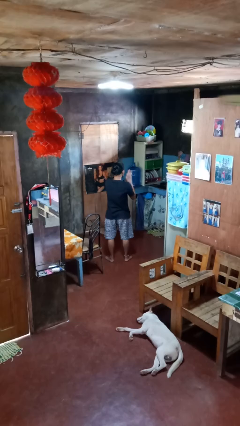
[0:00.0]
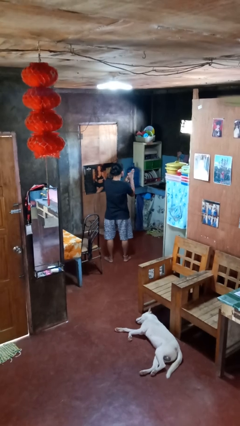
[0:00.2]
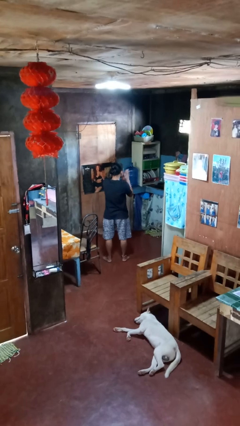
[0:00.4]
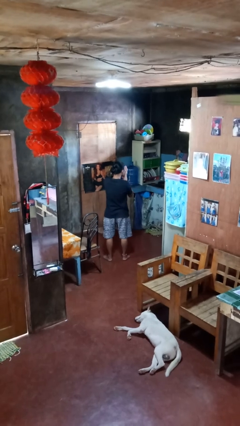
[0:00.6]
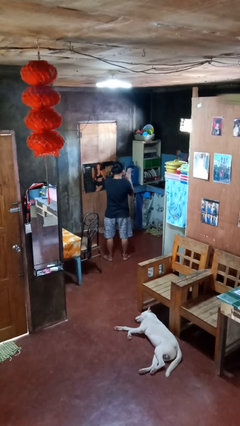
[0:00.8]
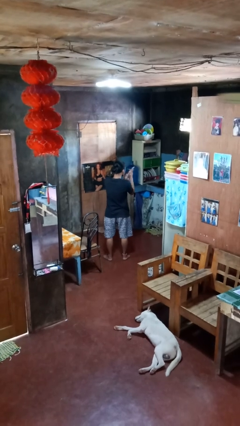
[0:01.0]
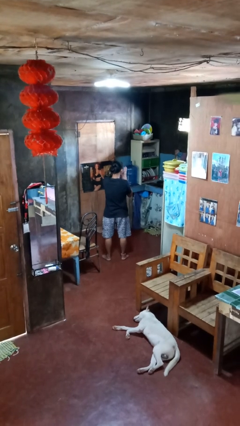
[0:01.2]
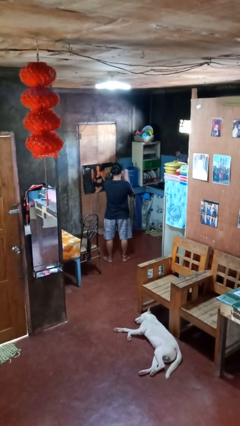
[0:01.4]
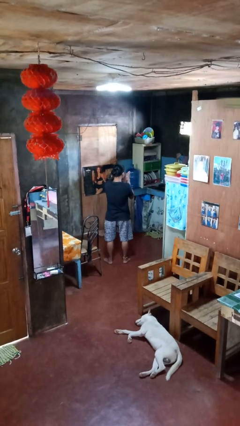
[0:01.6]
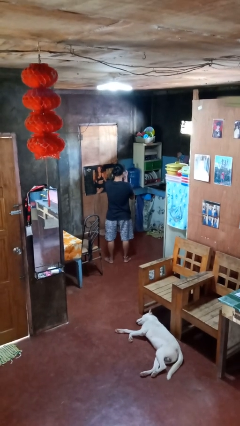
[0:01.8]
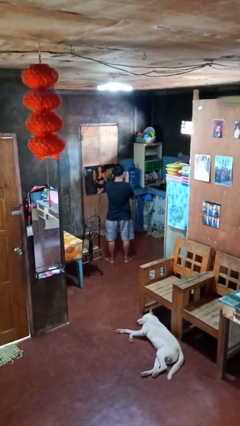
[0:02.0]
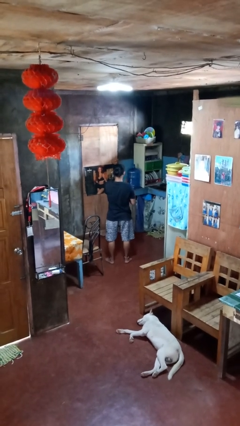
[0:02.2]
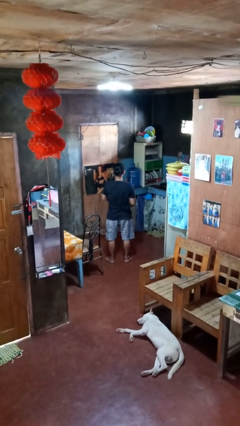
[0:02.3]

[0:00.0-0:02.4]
person blows into hands

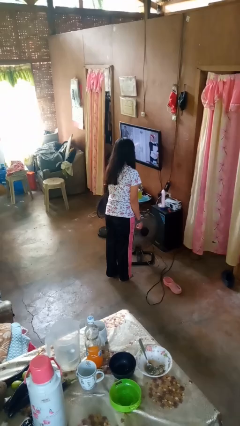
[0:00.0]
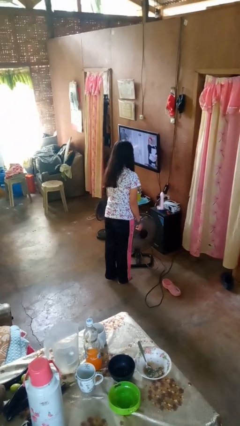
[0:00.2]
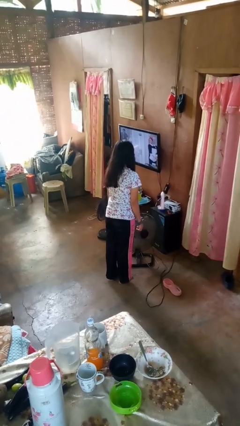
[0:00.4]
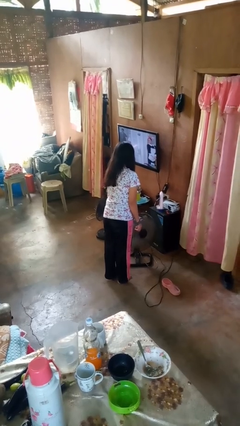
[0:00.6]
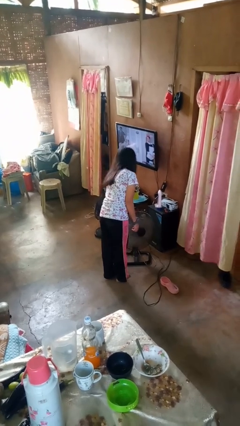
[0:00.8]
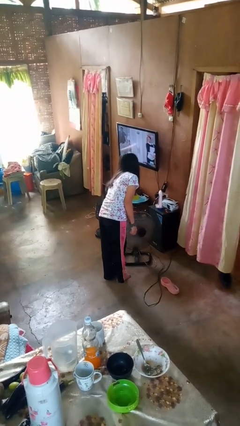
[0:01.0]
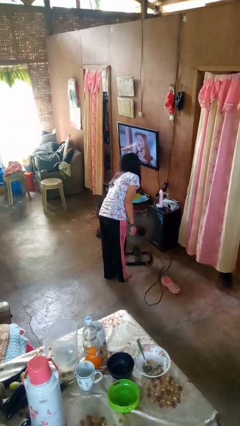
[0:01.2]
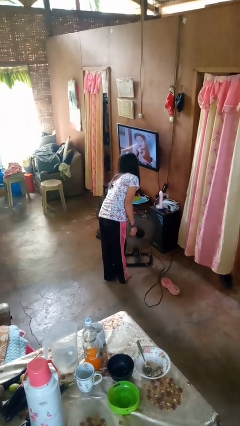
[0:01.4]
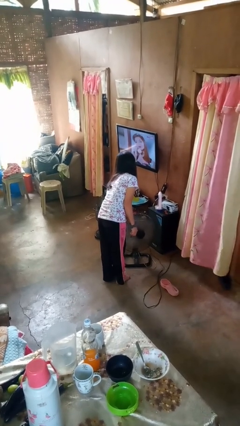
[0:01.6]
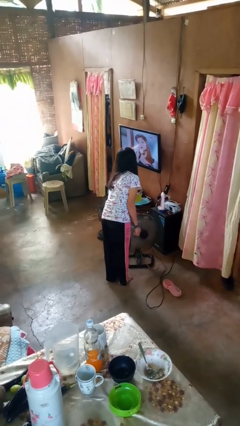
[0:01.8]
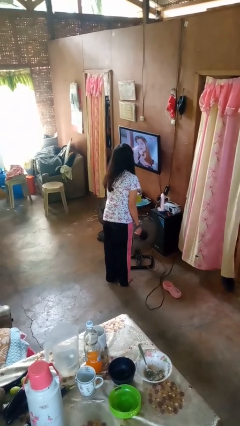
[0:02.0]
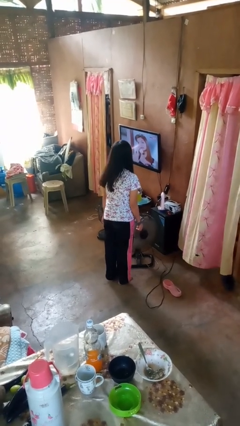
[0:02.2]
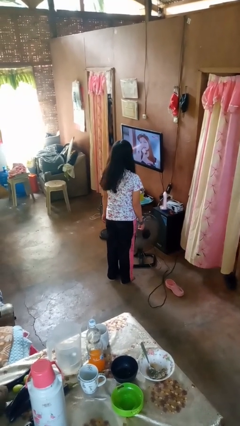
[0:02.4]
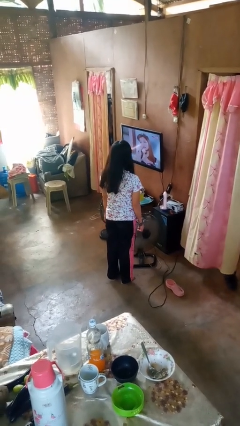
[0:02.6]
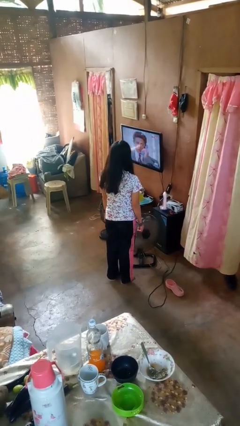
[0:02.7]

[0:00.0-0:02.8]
person turns off fan

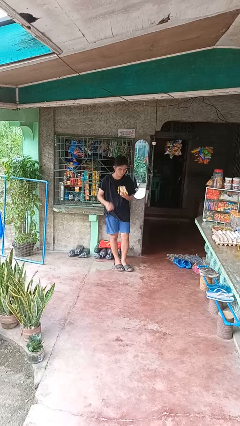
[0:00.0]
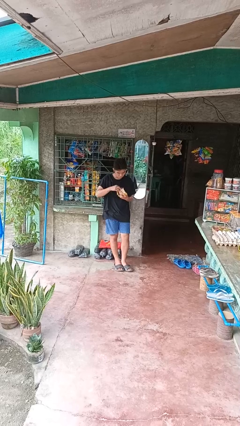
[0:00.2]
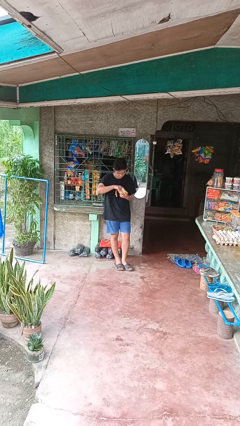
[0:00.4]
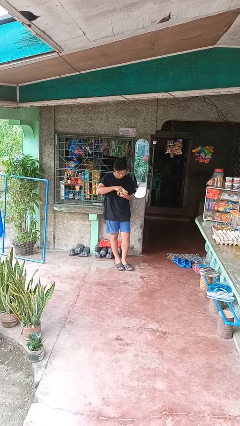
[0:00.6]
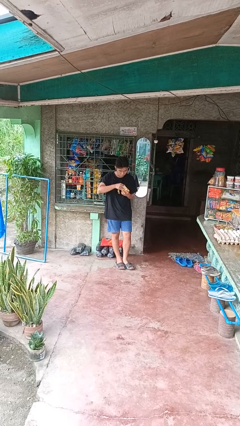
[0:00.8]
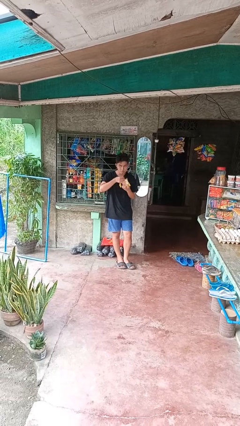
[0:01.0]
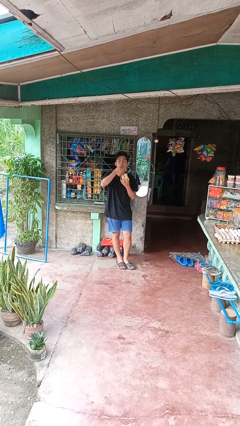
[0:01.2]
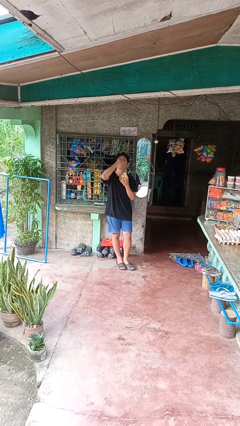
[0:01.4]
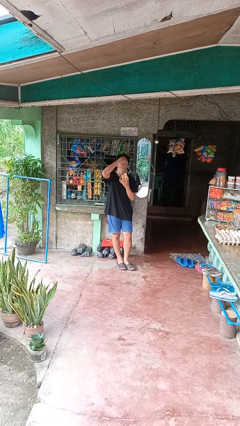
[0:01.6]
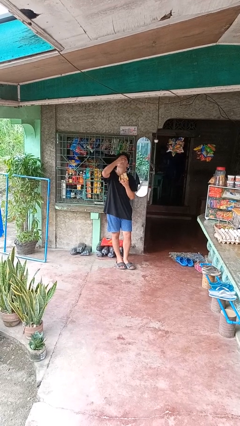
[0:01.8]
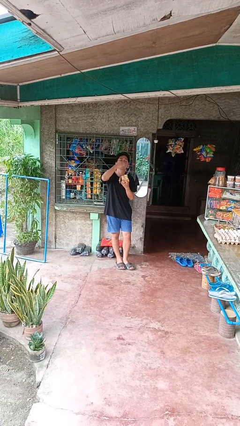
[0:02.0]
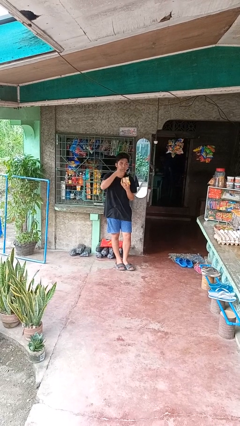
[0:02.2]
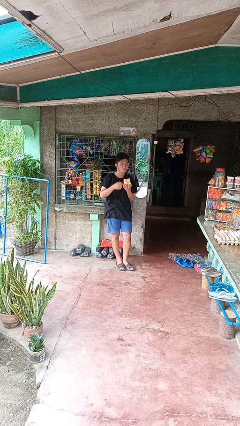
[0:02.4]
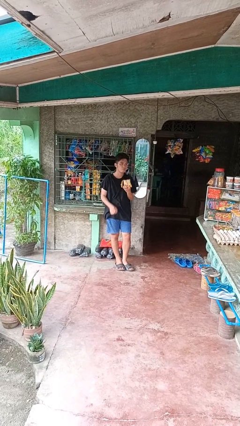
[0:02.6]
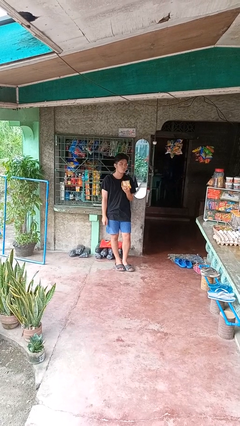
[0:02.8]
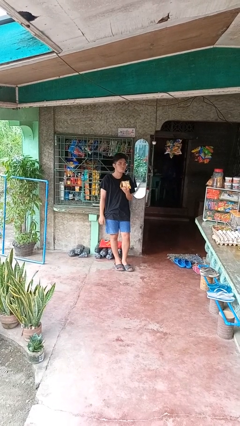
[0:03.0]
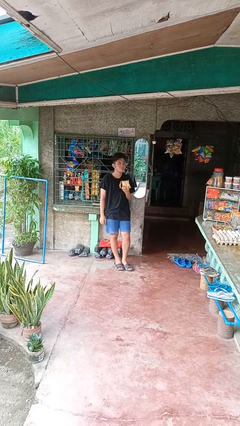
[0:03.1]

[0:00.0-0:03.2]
person eats snack from bag

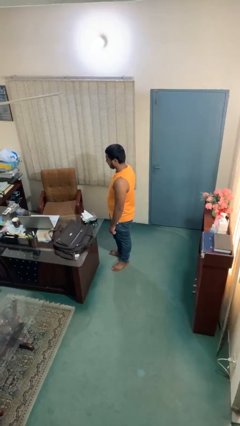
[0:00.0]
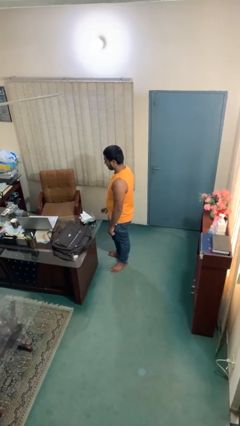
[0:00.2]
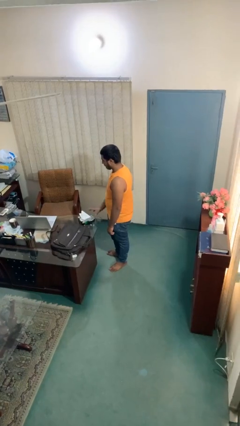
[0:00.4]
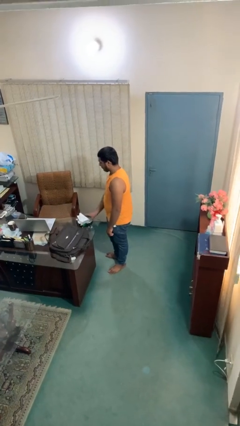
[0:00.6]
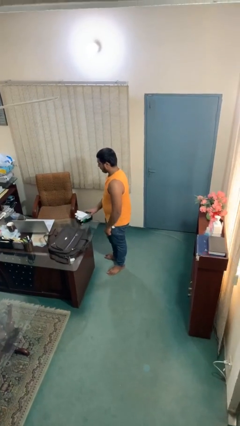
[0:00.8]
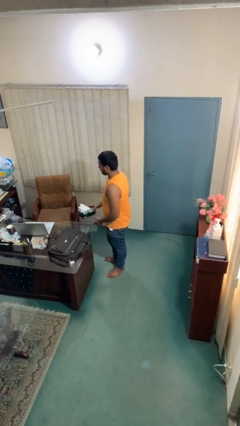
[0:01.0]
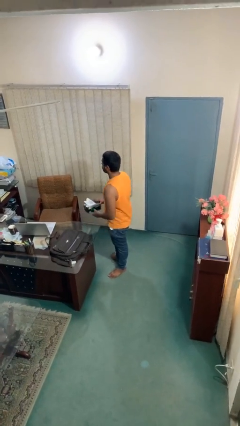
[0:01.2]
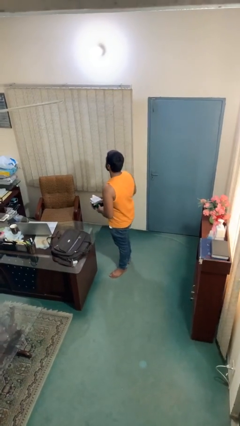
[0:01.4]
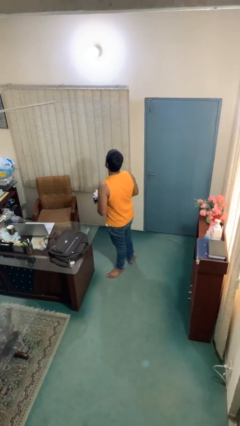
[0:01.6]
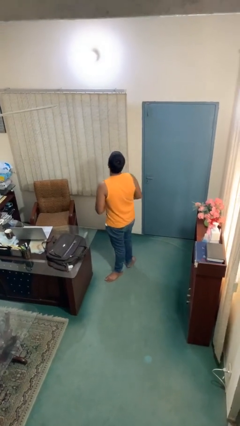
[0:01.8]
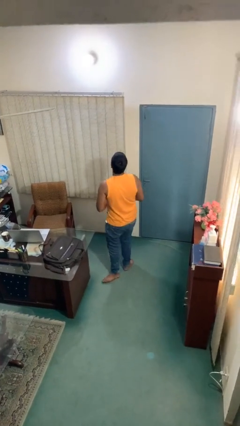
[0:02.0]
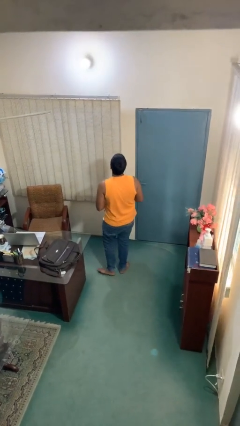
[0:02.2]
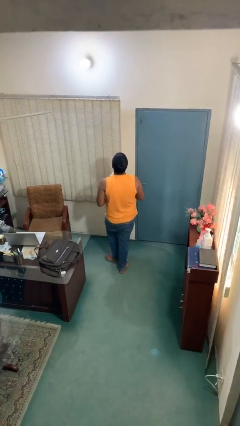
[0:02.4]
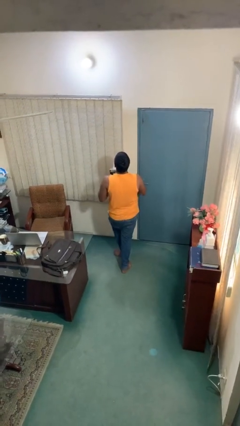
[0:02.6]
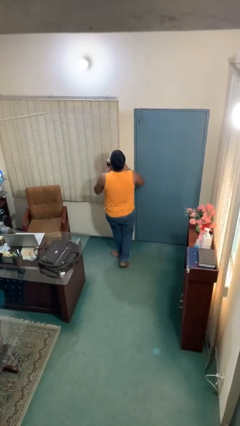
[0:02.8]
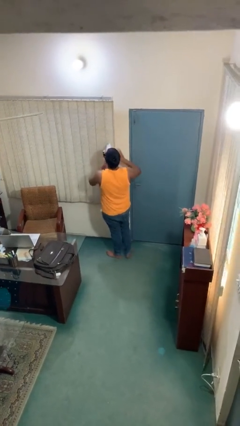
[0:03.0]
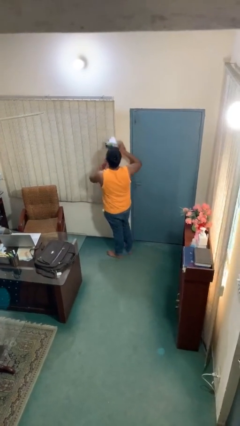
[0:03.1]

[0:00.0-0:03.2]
person picks up object from table

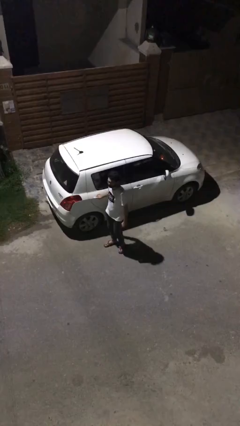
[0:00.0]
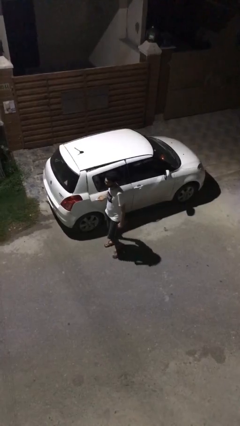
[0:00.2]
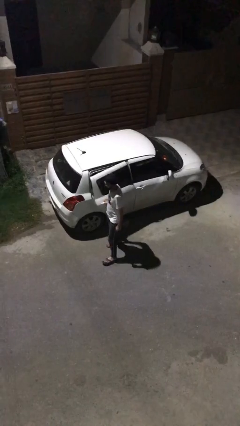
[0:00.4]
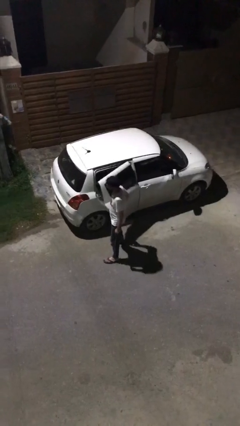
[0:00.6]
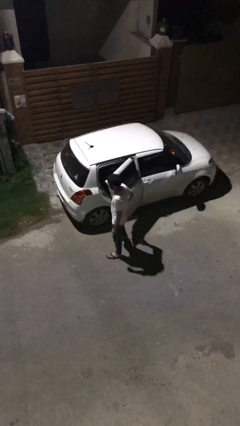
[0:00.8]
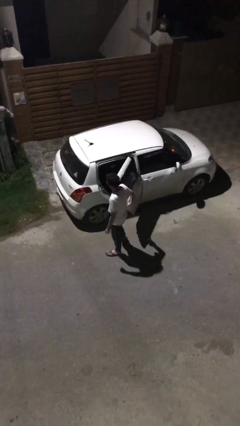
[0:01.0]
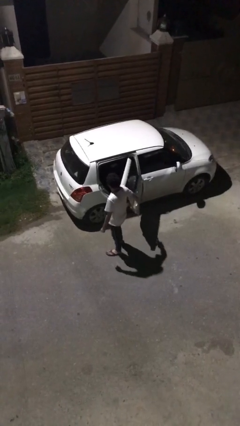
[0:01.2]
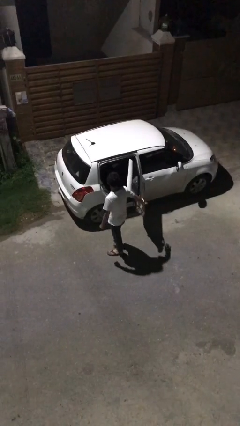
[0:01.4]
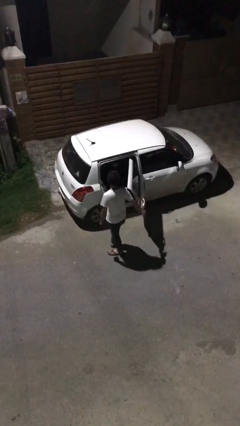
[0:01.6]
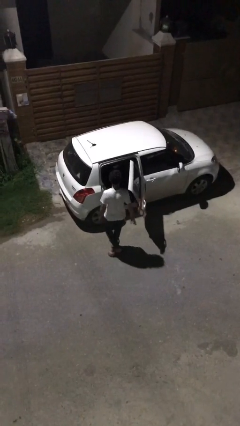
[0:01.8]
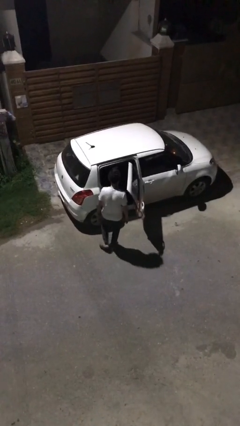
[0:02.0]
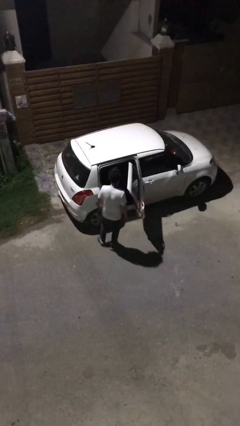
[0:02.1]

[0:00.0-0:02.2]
person opens car door

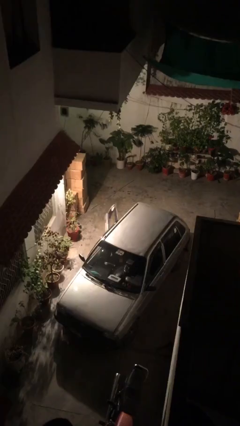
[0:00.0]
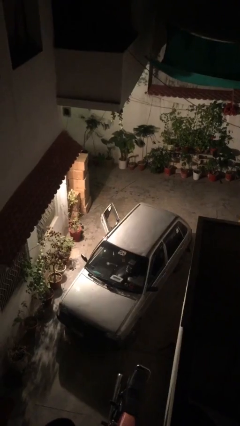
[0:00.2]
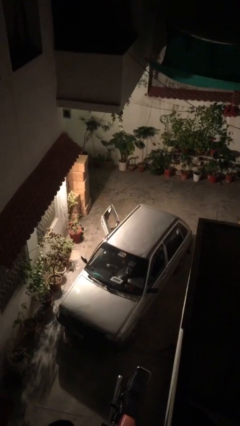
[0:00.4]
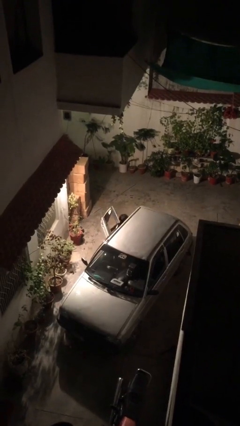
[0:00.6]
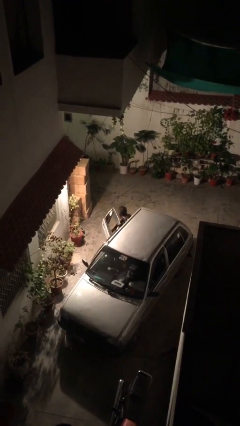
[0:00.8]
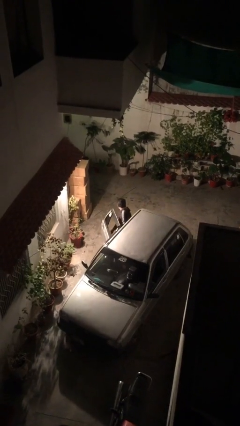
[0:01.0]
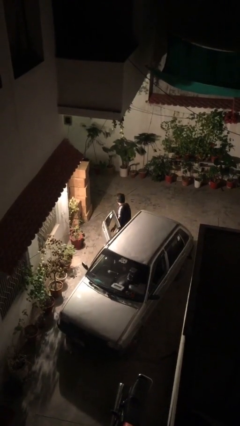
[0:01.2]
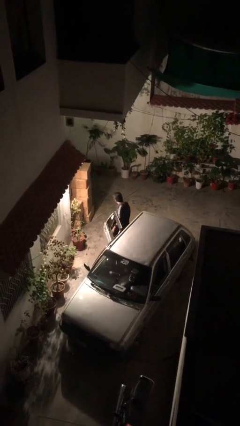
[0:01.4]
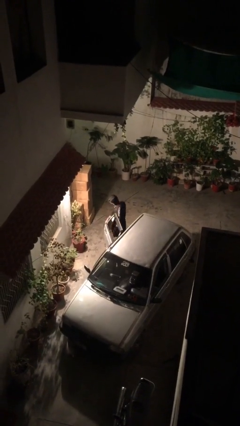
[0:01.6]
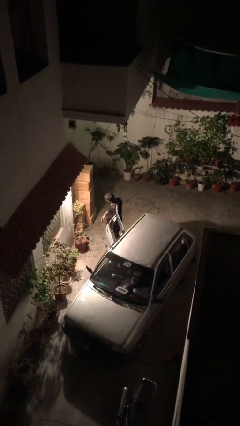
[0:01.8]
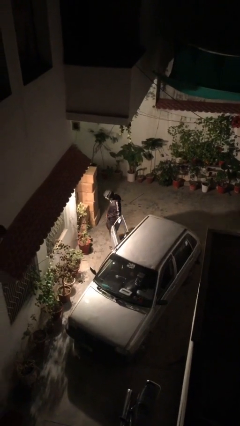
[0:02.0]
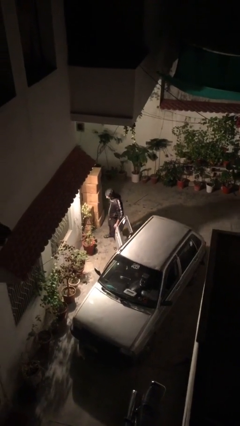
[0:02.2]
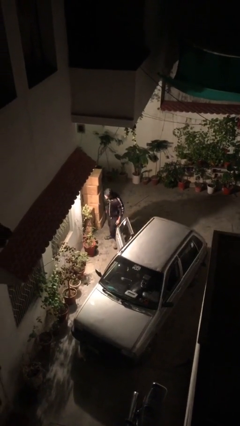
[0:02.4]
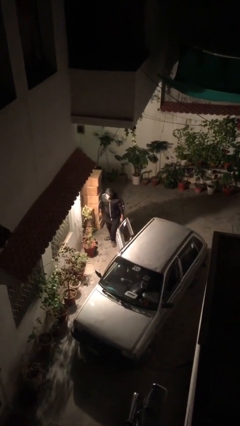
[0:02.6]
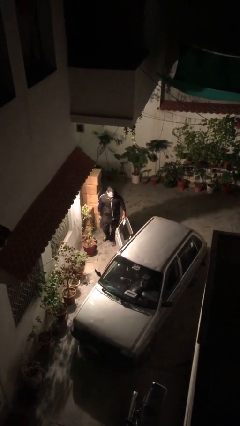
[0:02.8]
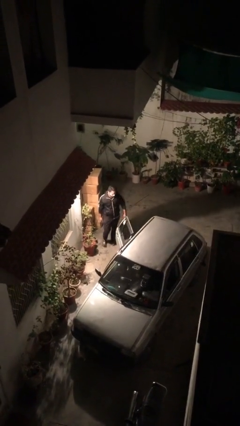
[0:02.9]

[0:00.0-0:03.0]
person exits car

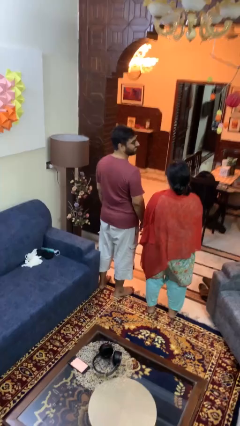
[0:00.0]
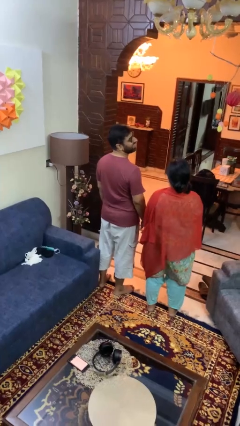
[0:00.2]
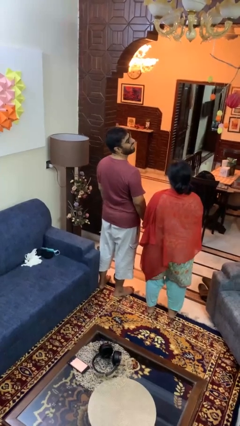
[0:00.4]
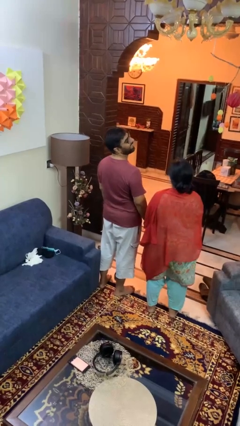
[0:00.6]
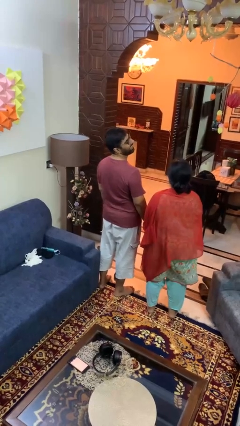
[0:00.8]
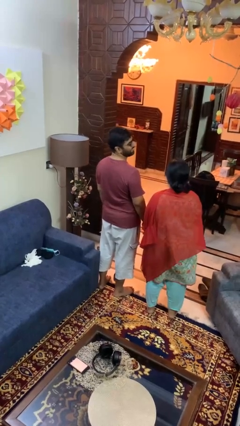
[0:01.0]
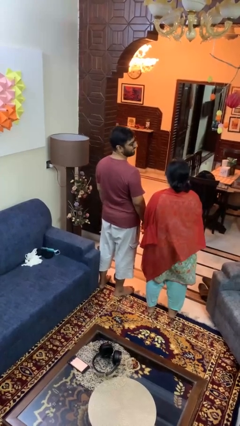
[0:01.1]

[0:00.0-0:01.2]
person laughs with person
